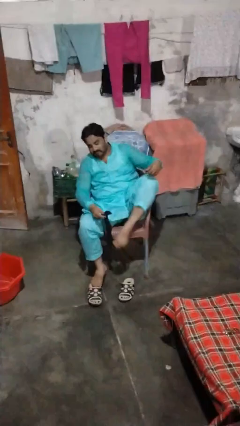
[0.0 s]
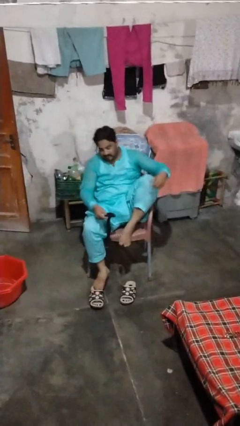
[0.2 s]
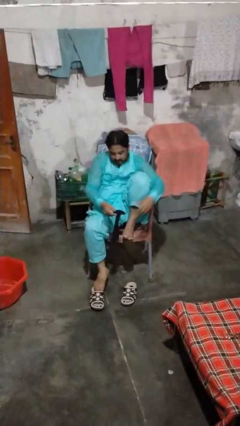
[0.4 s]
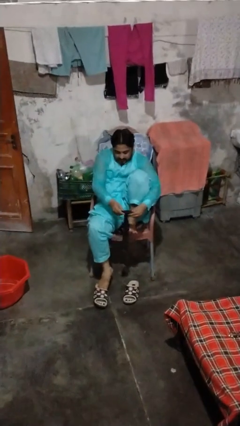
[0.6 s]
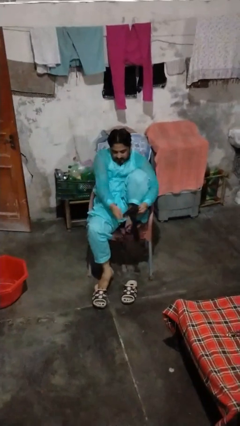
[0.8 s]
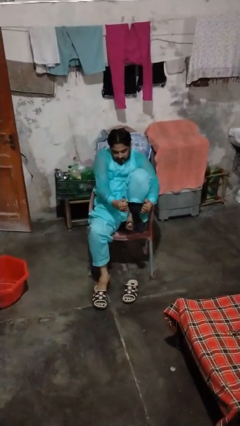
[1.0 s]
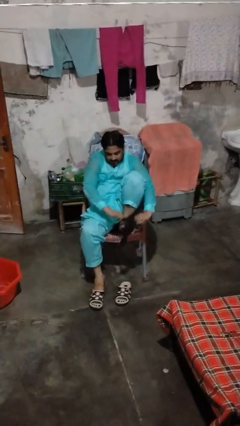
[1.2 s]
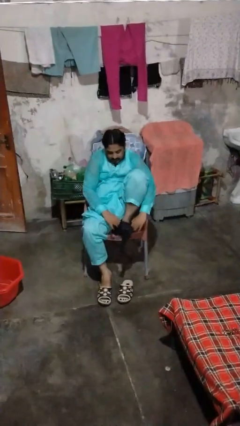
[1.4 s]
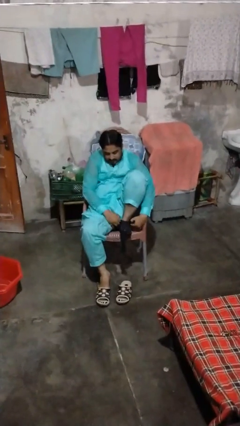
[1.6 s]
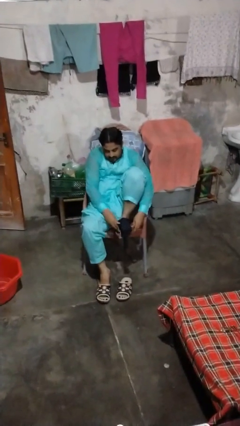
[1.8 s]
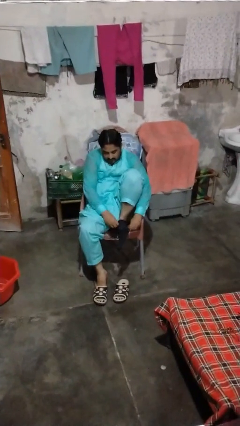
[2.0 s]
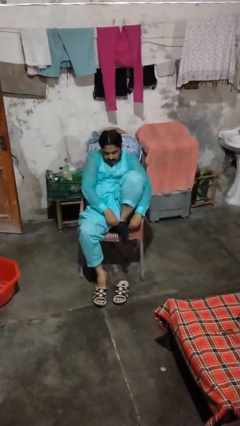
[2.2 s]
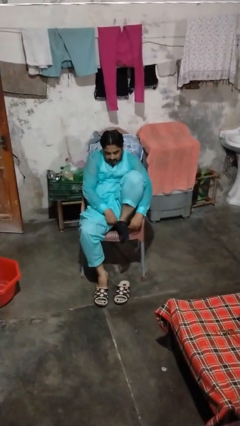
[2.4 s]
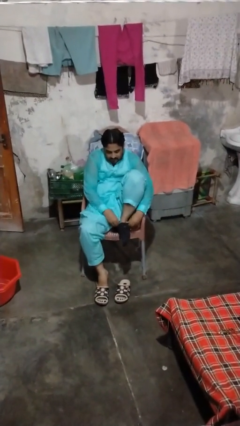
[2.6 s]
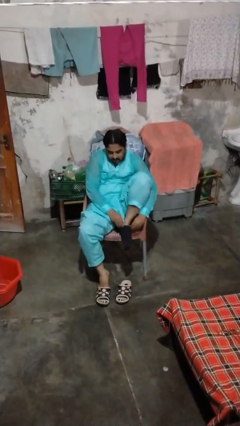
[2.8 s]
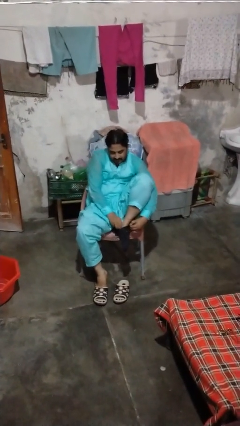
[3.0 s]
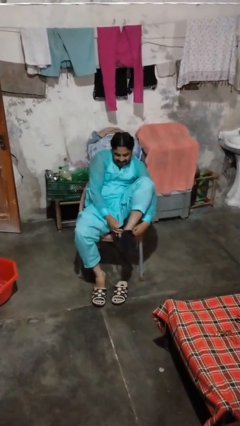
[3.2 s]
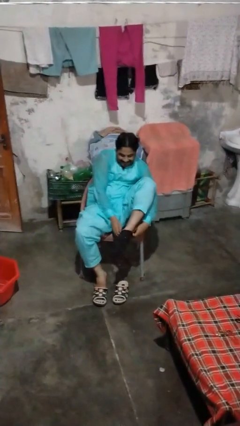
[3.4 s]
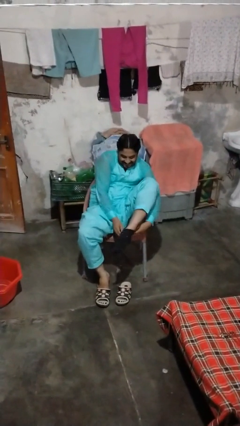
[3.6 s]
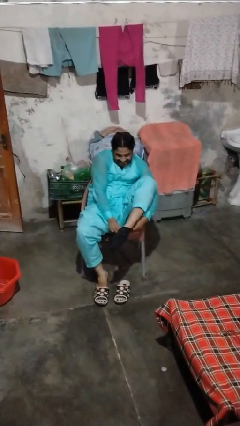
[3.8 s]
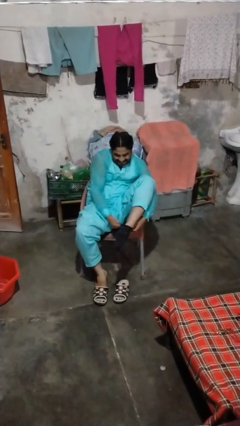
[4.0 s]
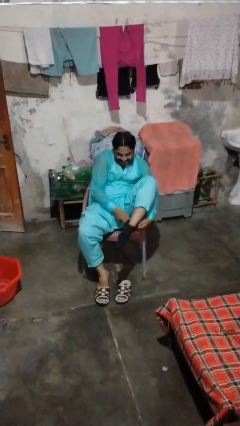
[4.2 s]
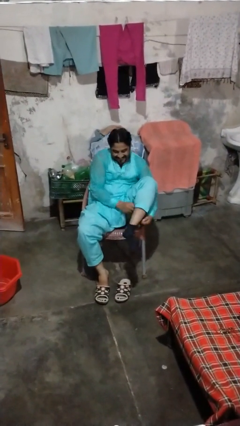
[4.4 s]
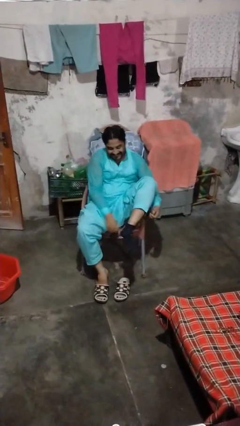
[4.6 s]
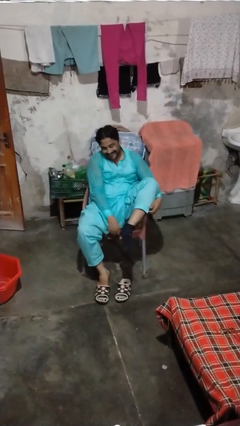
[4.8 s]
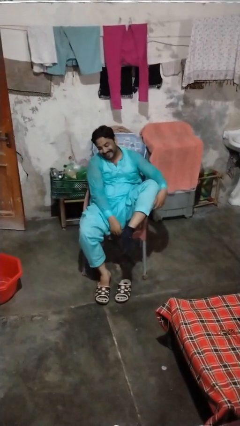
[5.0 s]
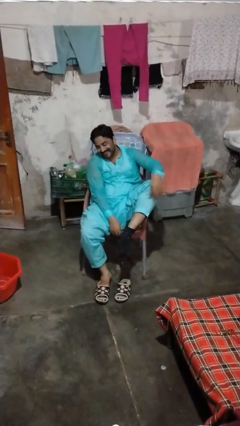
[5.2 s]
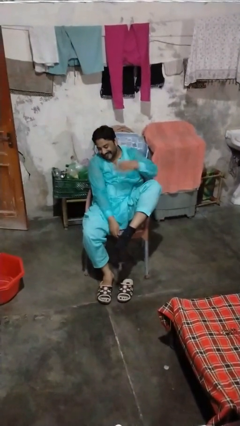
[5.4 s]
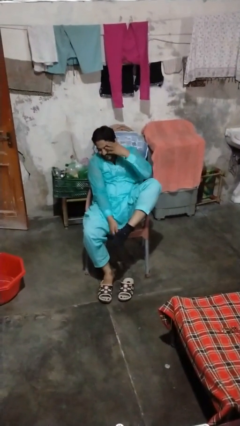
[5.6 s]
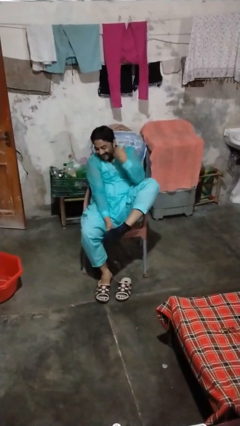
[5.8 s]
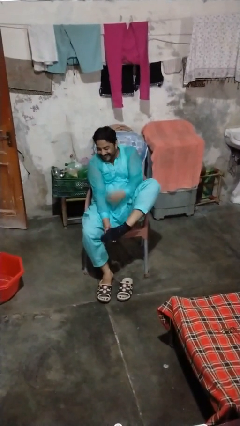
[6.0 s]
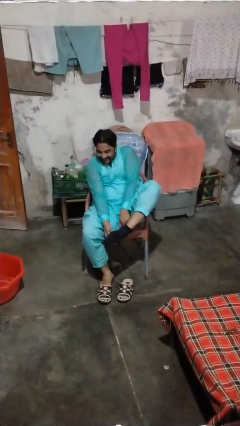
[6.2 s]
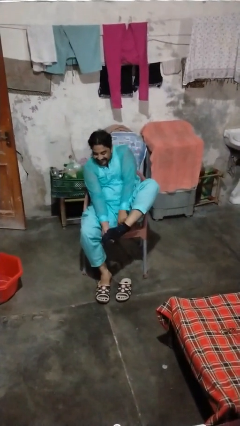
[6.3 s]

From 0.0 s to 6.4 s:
person puts on socks

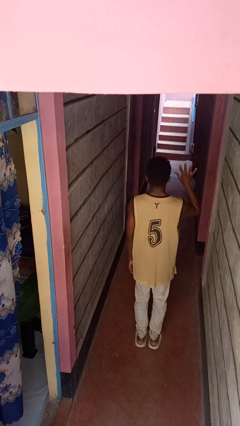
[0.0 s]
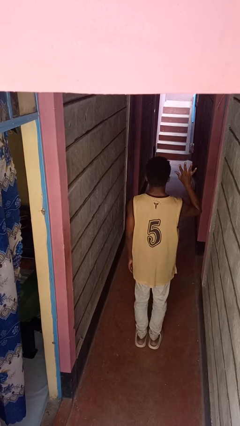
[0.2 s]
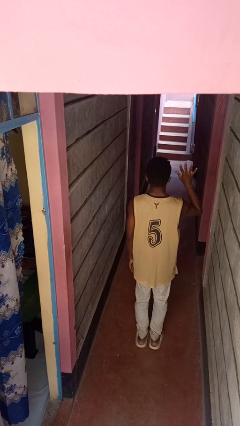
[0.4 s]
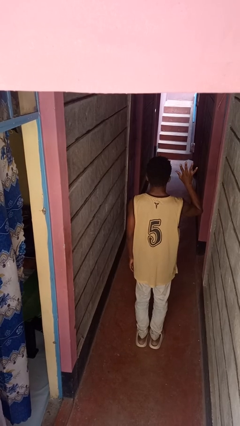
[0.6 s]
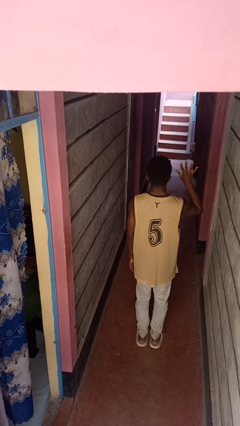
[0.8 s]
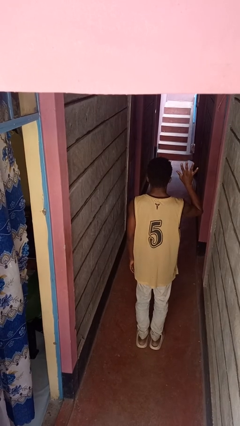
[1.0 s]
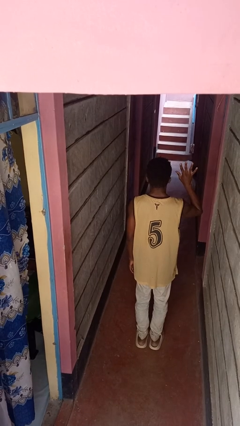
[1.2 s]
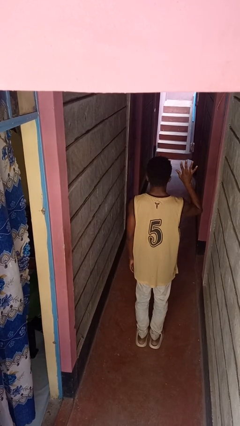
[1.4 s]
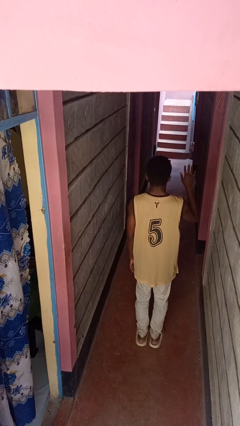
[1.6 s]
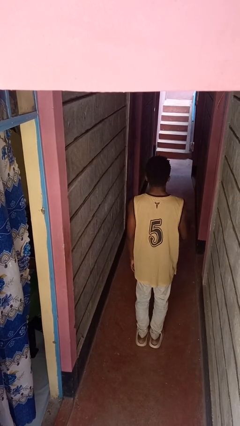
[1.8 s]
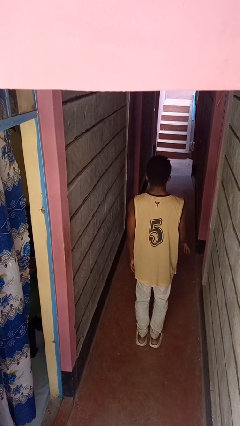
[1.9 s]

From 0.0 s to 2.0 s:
person gestures number five

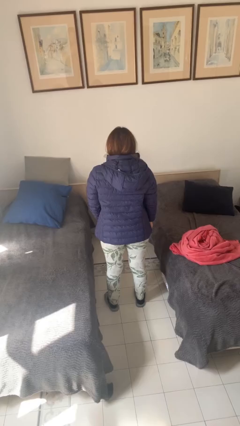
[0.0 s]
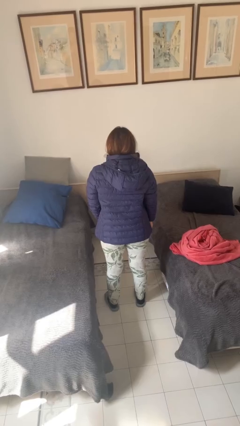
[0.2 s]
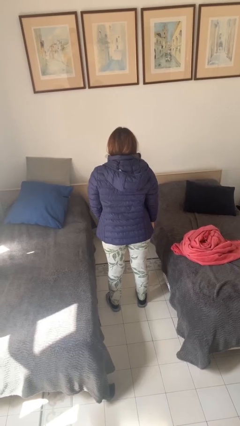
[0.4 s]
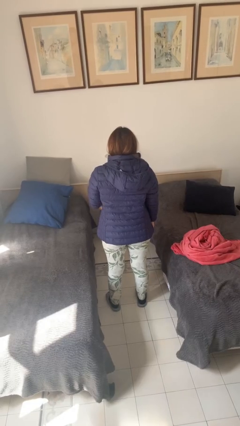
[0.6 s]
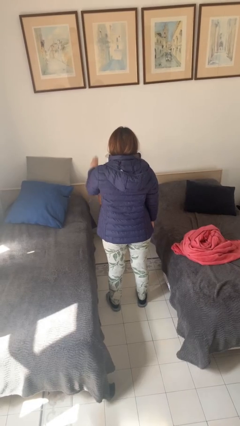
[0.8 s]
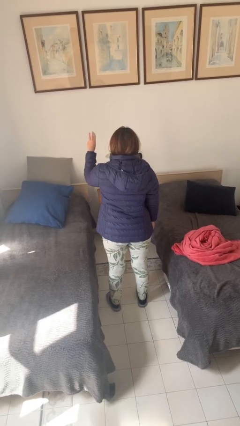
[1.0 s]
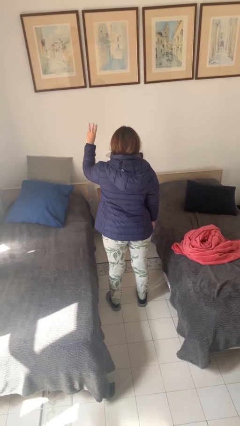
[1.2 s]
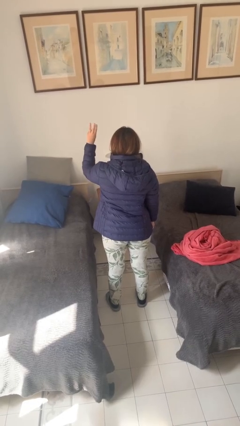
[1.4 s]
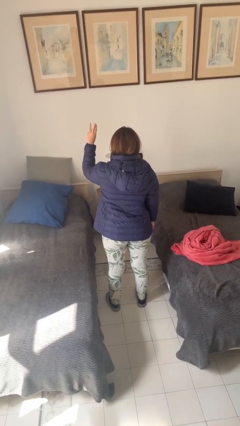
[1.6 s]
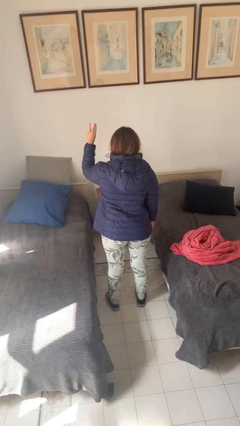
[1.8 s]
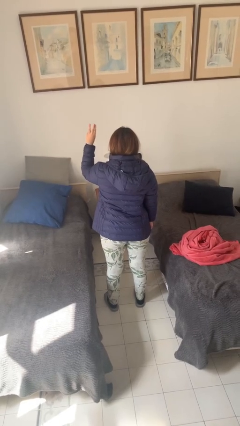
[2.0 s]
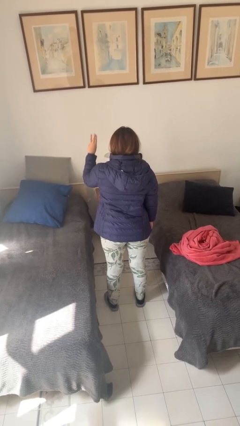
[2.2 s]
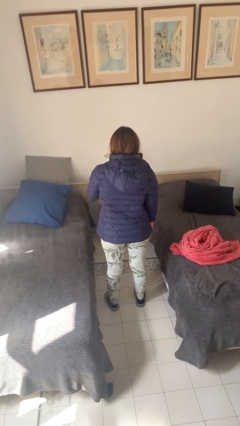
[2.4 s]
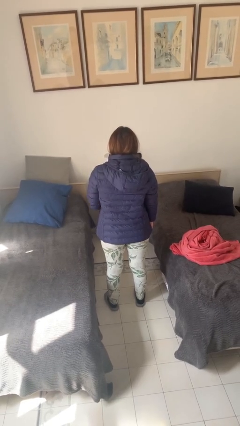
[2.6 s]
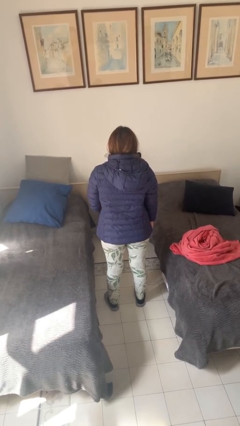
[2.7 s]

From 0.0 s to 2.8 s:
person gestures number three

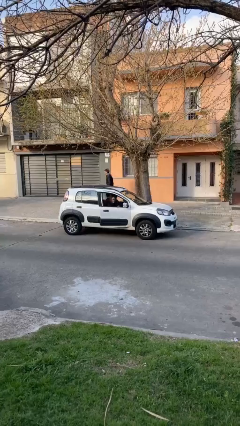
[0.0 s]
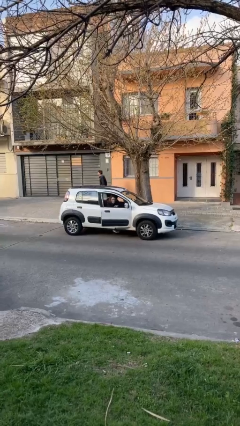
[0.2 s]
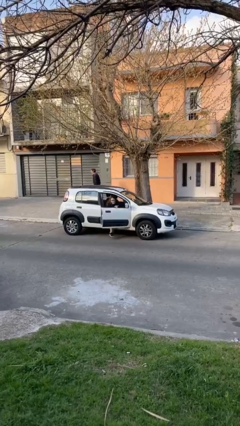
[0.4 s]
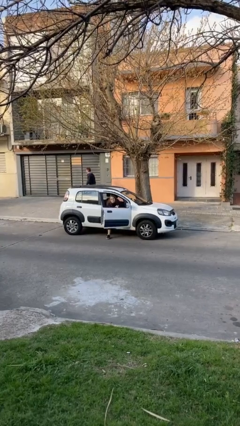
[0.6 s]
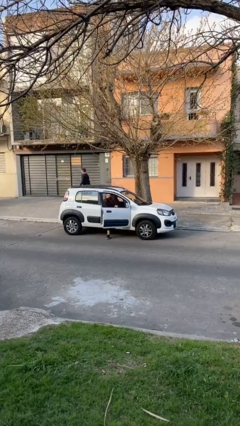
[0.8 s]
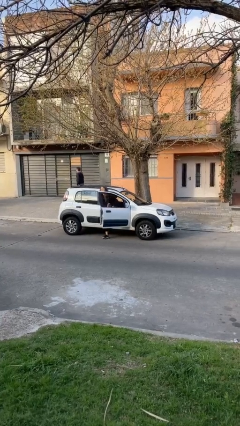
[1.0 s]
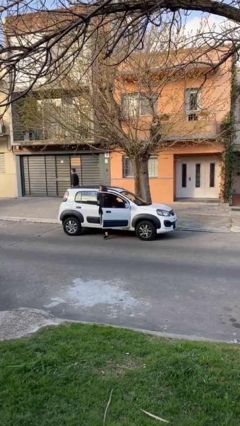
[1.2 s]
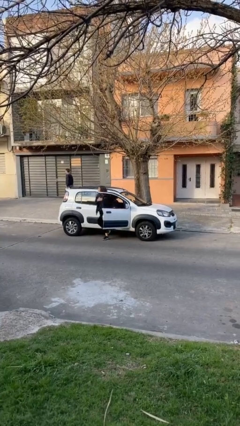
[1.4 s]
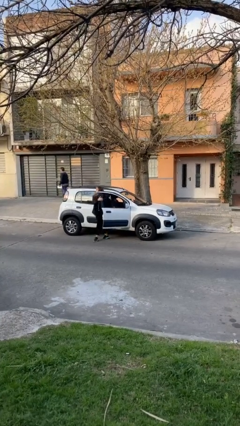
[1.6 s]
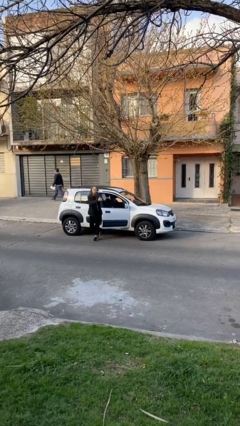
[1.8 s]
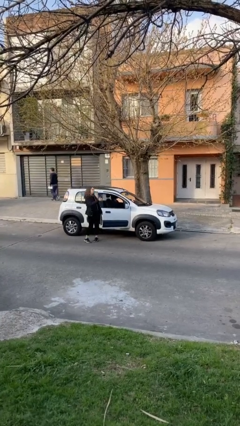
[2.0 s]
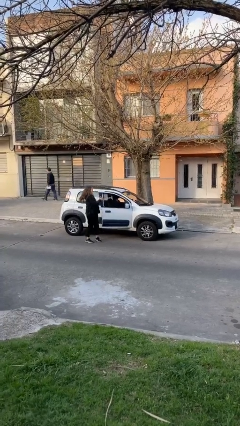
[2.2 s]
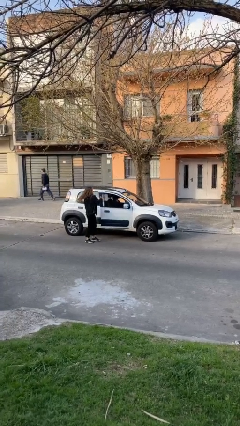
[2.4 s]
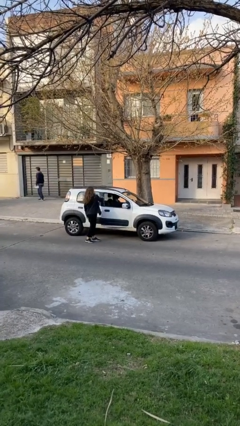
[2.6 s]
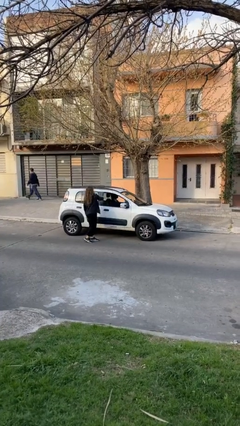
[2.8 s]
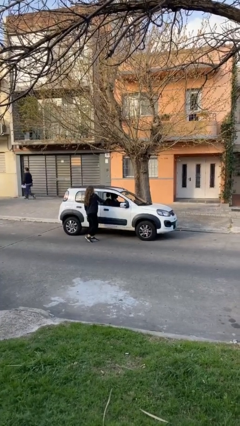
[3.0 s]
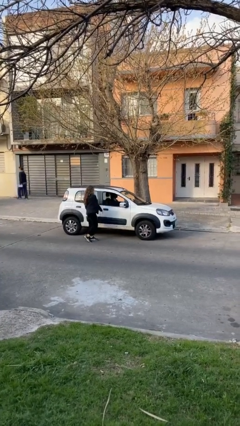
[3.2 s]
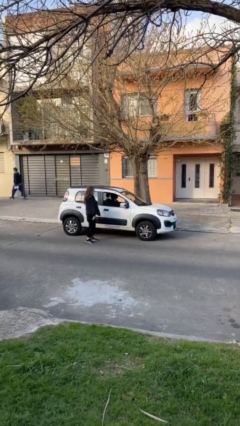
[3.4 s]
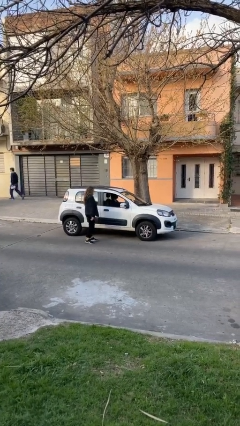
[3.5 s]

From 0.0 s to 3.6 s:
car drops off person

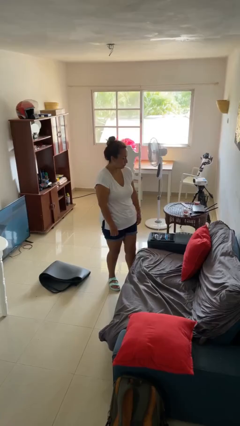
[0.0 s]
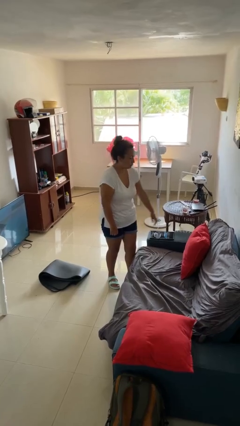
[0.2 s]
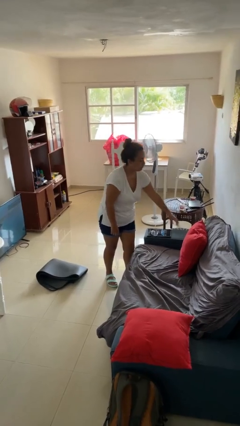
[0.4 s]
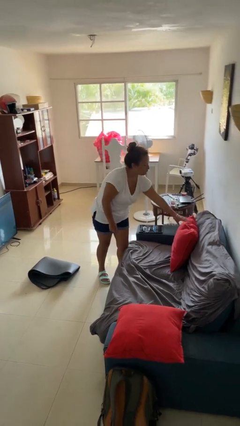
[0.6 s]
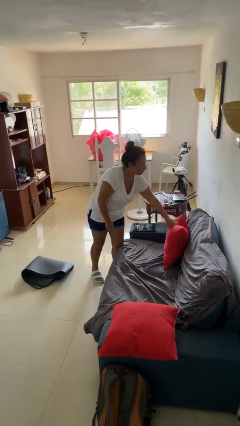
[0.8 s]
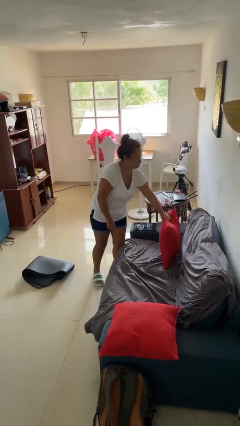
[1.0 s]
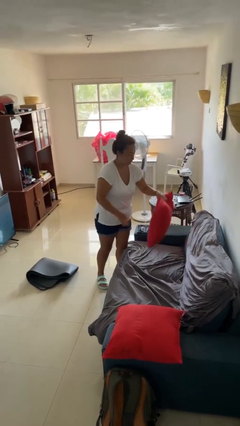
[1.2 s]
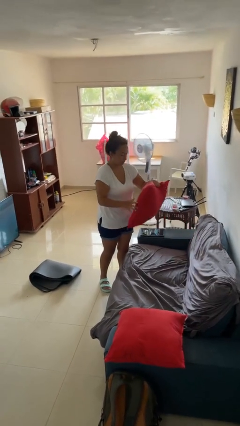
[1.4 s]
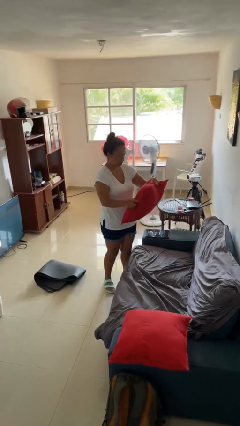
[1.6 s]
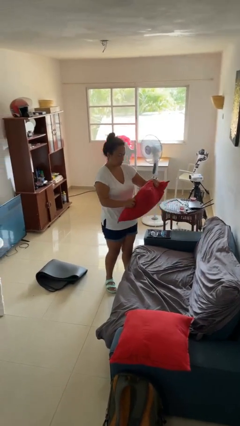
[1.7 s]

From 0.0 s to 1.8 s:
person picks up object from couch

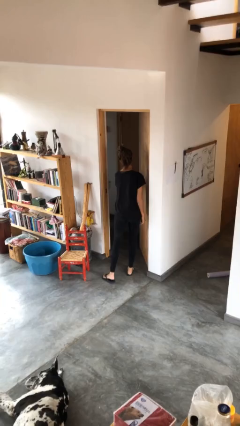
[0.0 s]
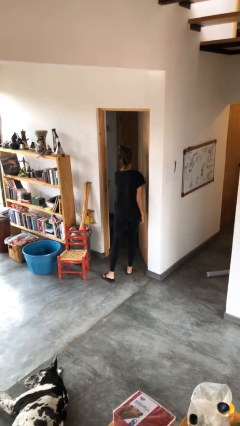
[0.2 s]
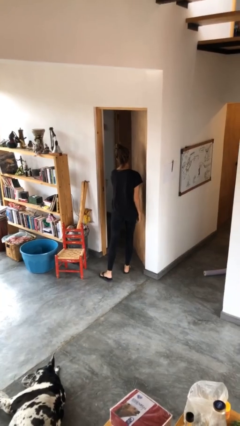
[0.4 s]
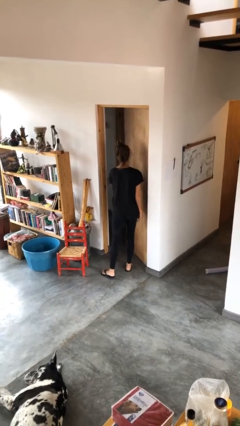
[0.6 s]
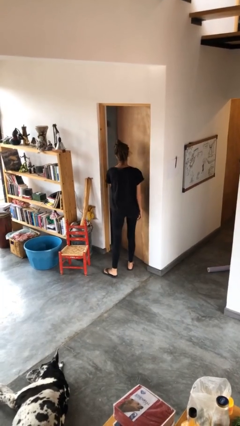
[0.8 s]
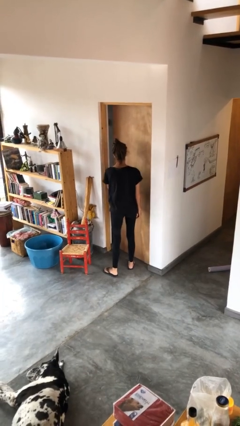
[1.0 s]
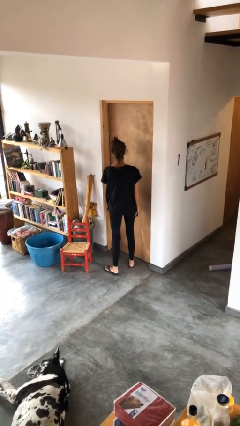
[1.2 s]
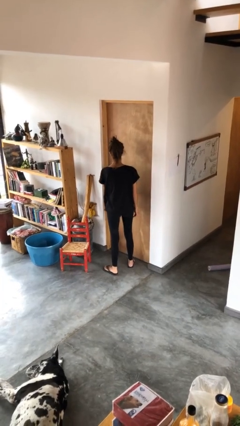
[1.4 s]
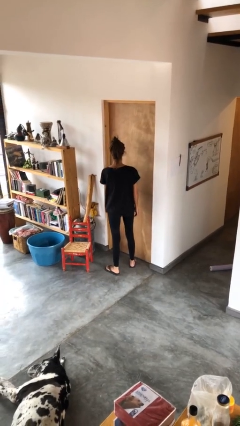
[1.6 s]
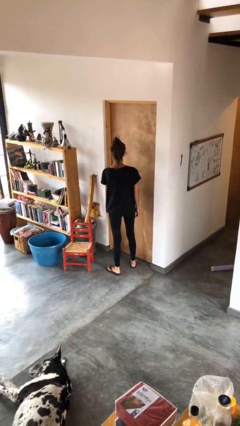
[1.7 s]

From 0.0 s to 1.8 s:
person closes facility door
